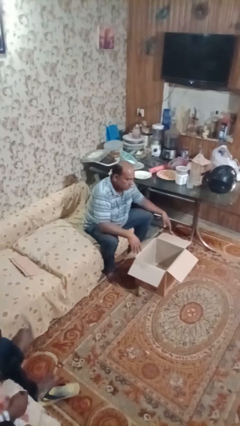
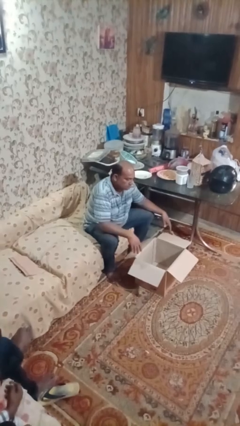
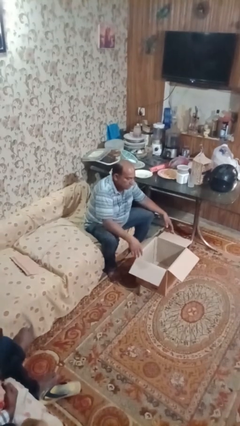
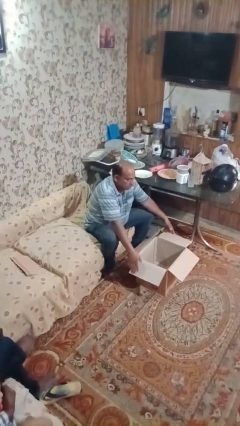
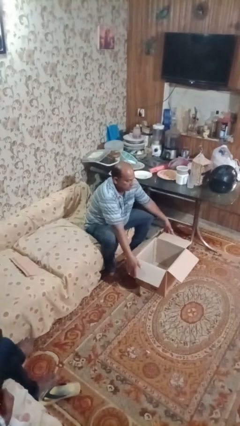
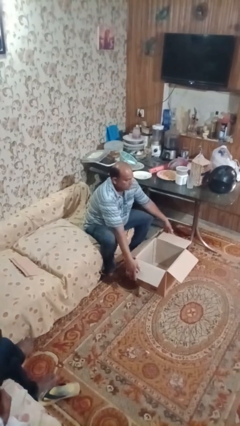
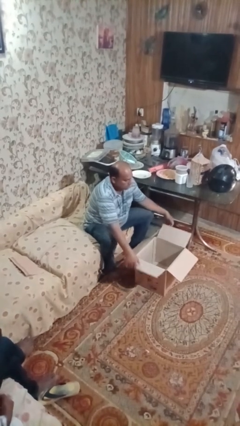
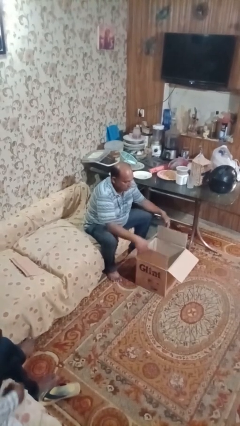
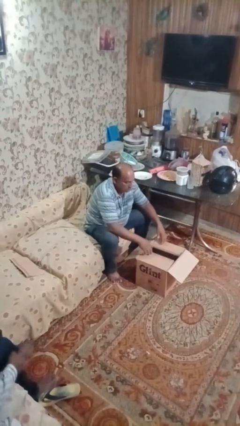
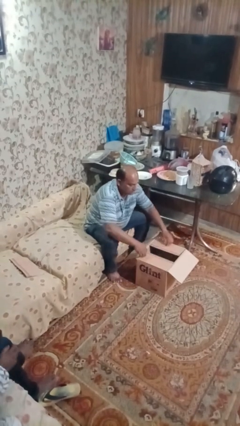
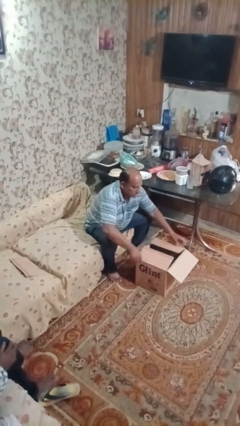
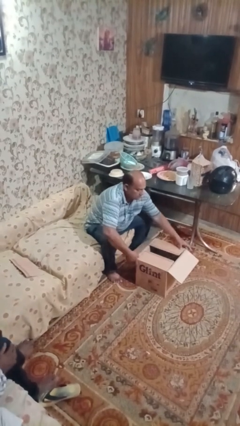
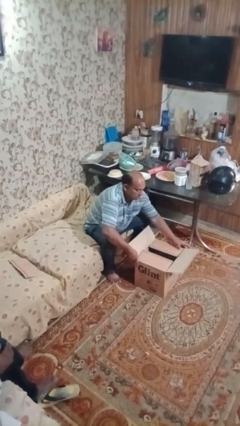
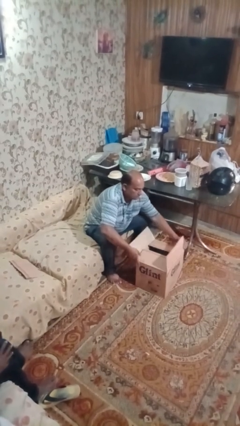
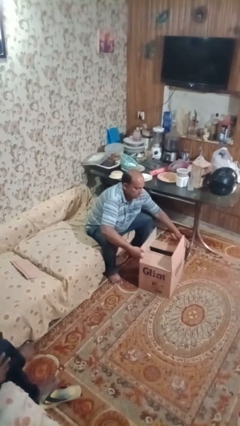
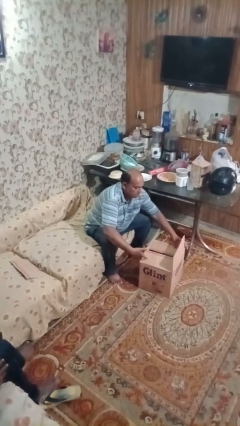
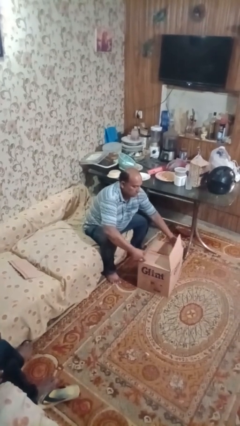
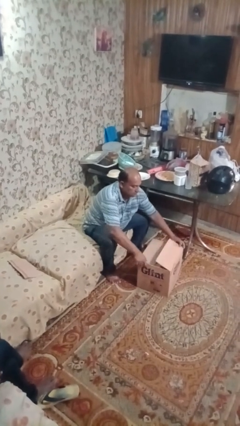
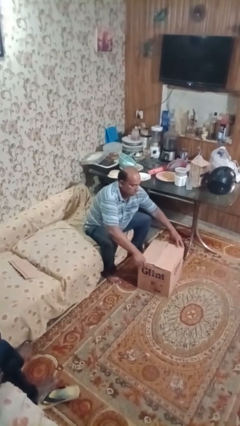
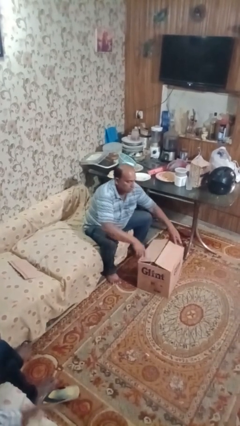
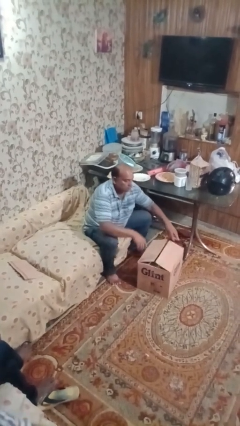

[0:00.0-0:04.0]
person closes box

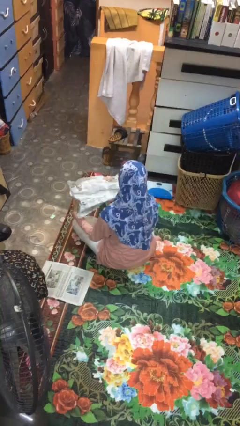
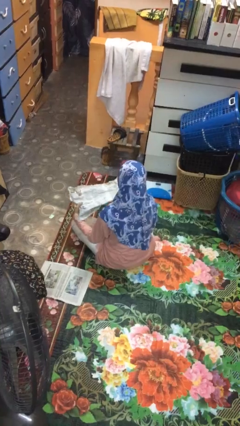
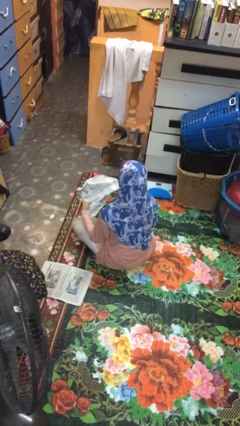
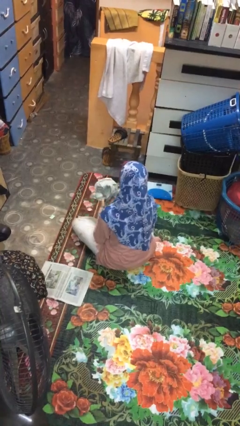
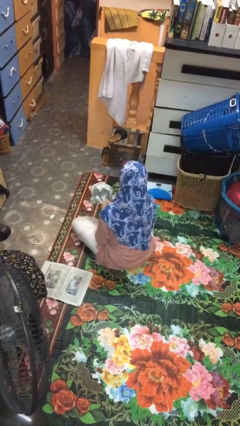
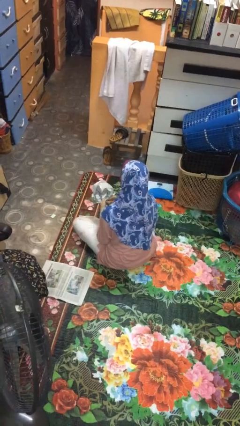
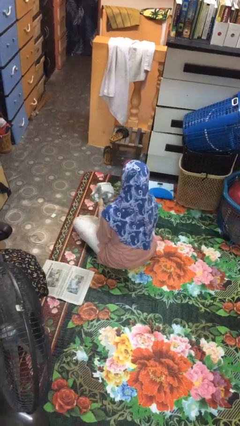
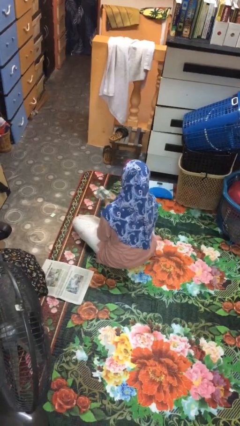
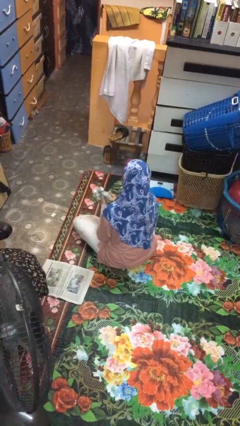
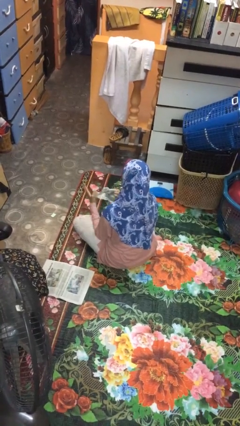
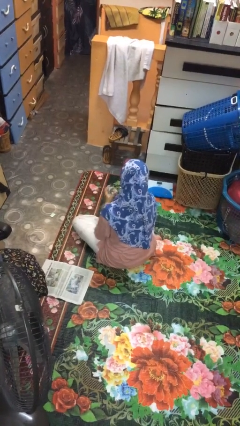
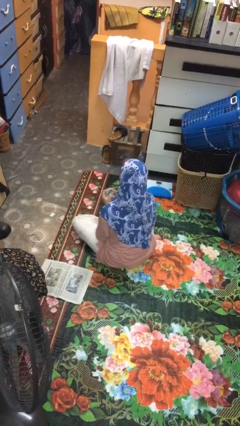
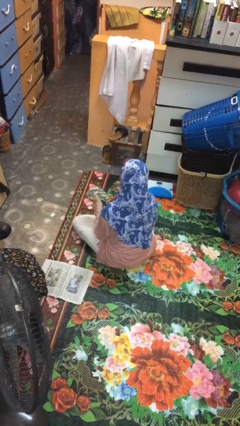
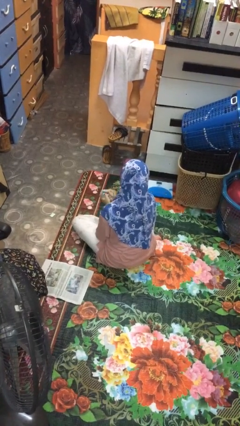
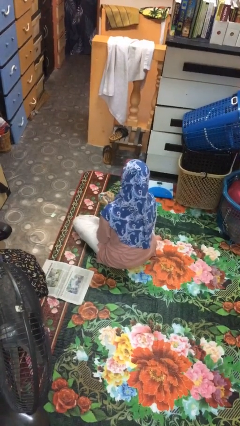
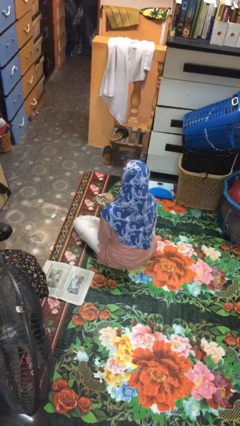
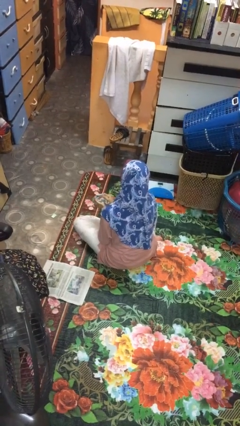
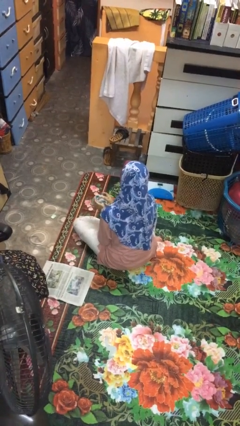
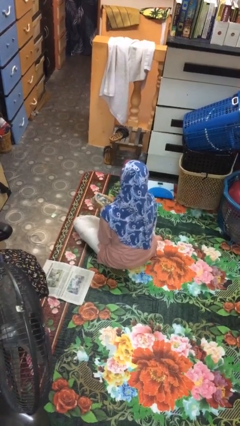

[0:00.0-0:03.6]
person crumples paper

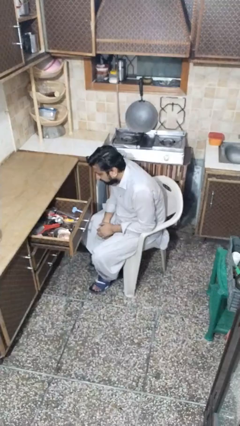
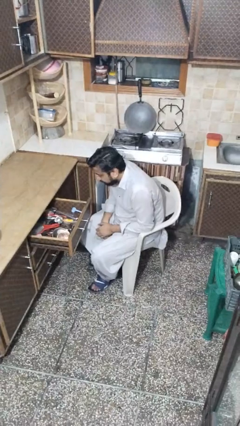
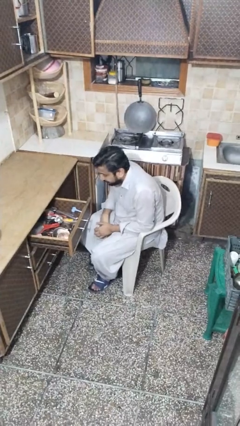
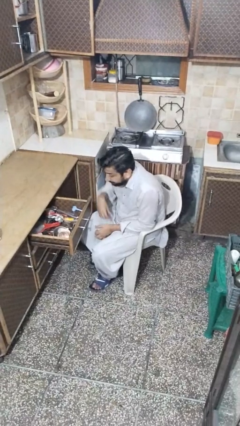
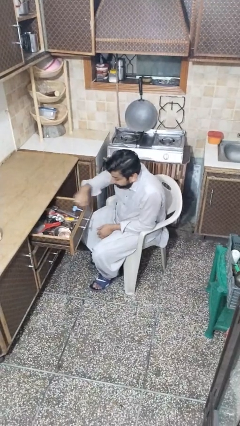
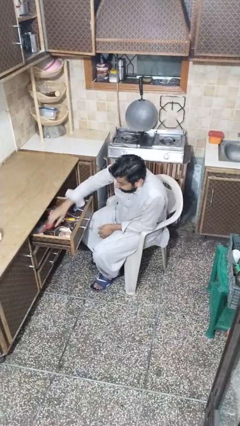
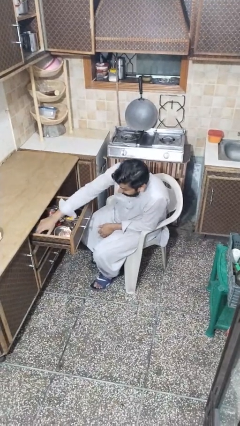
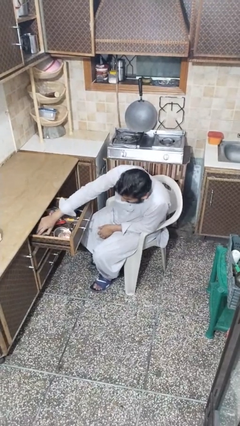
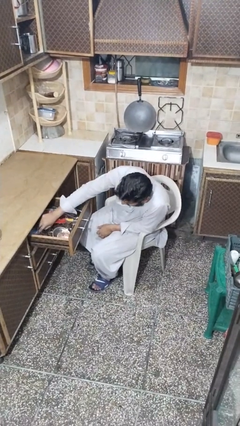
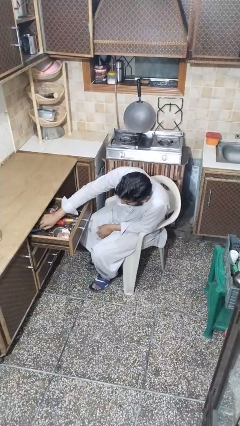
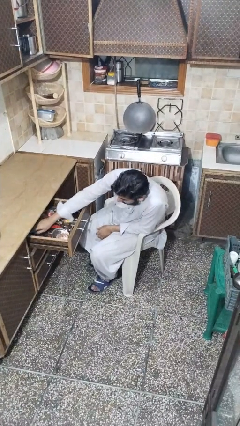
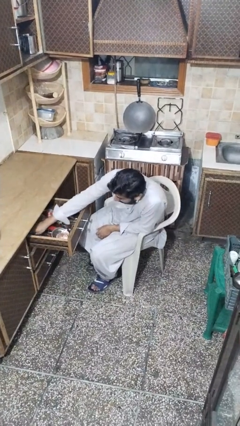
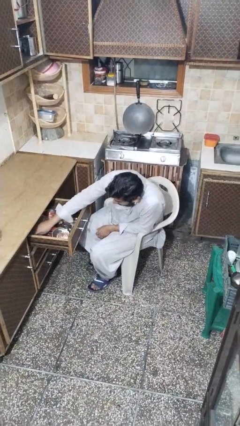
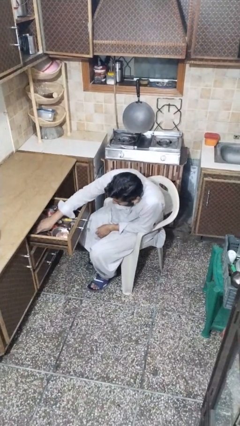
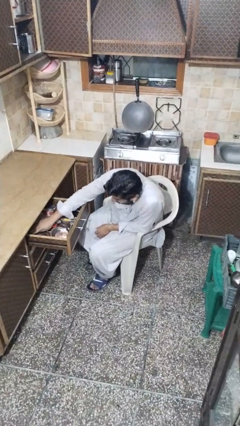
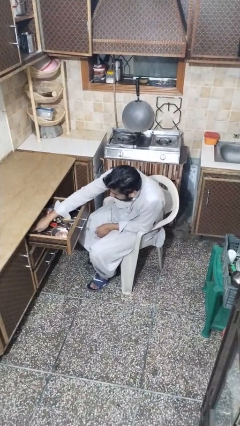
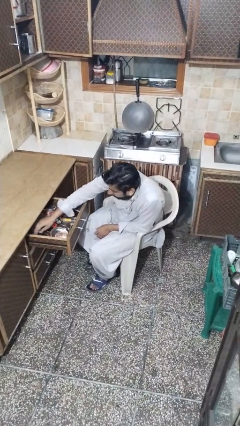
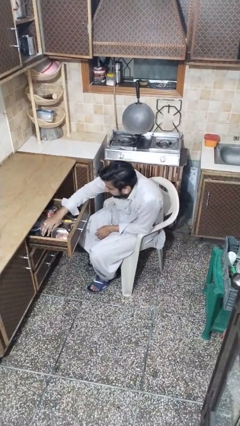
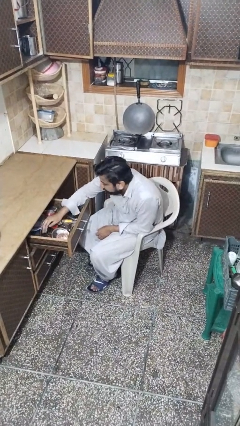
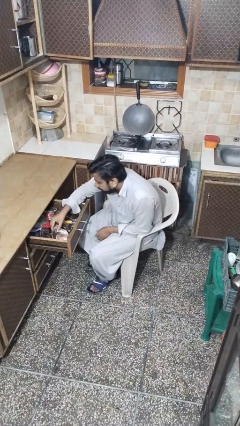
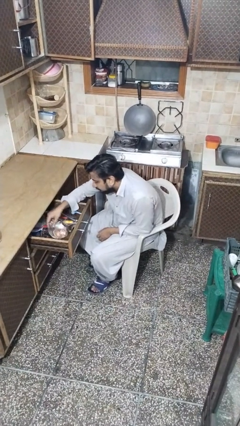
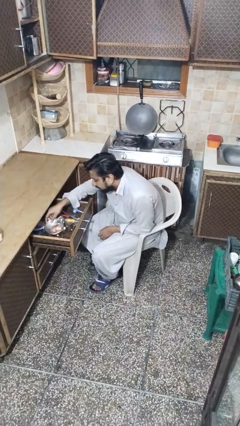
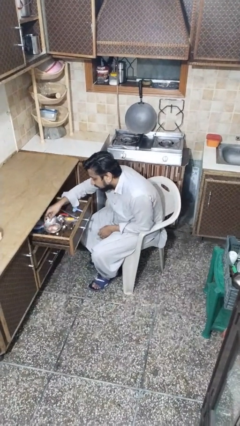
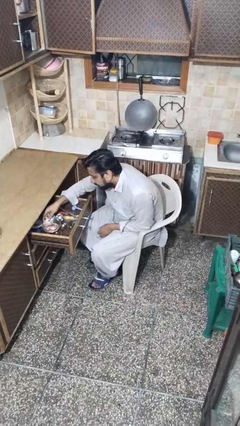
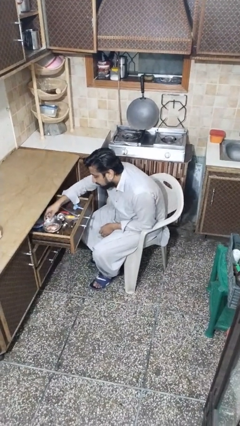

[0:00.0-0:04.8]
person searches in kitchen drawer

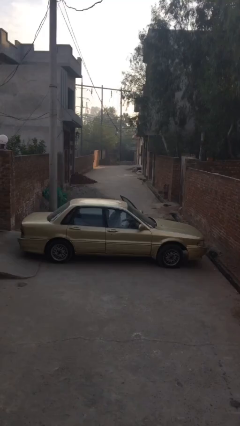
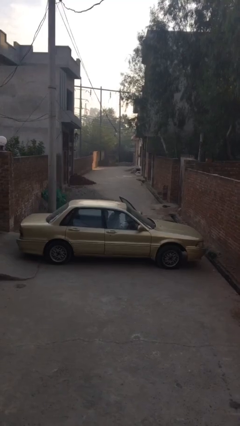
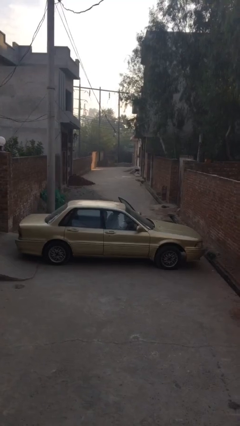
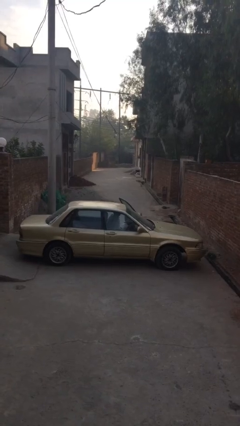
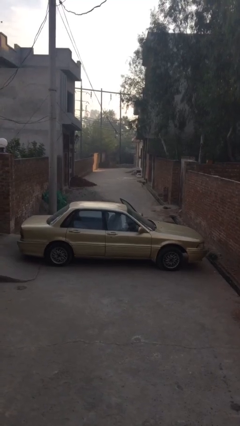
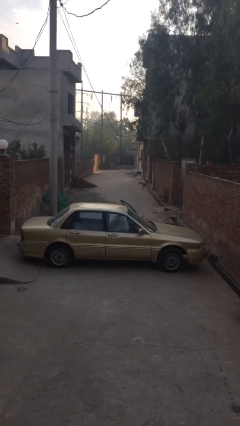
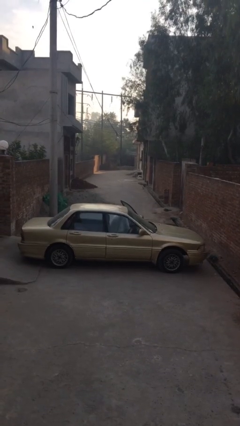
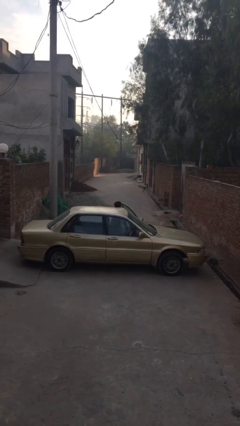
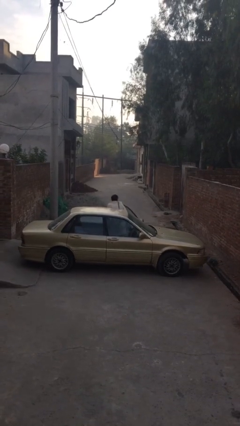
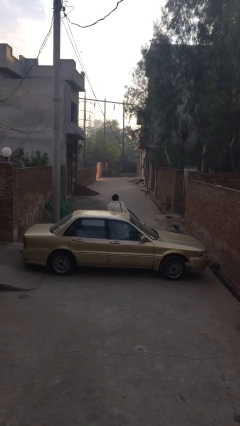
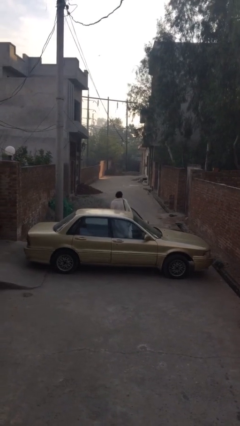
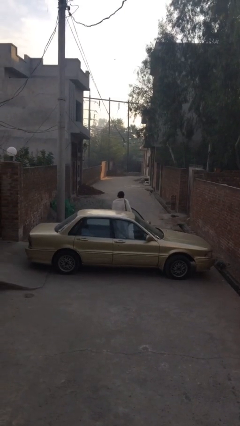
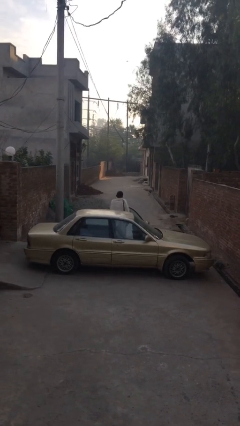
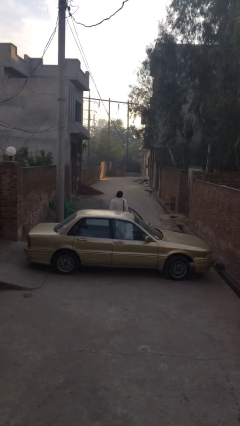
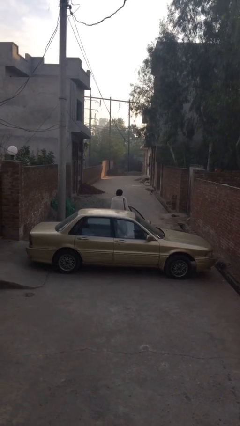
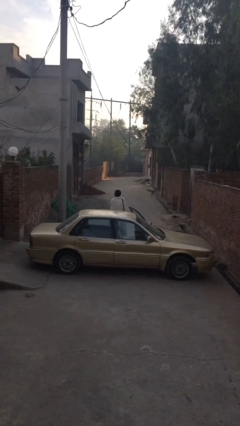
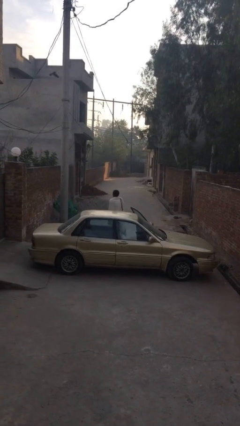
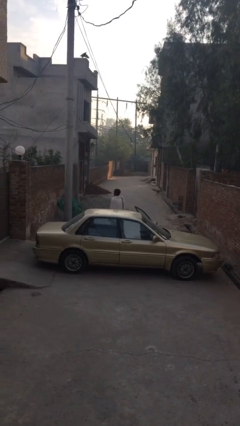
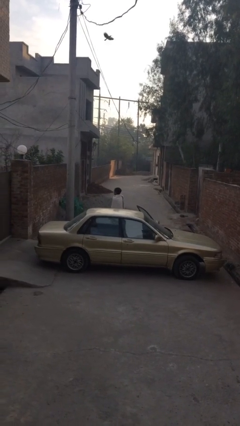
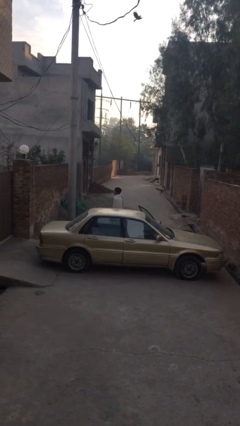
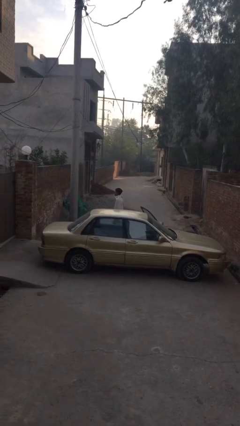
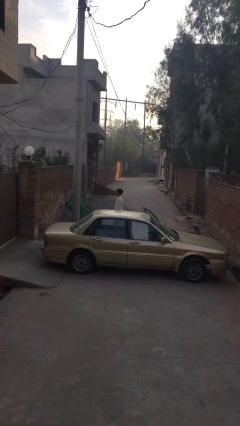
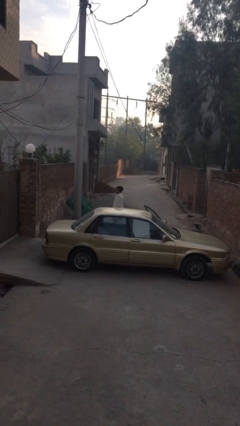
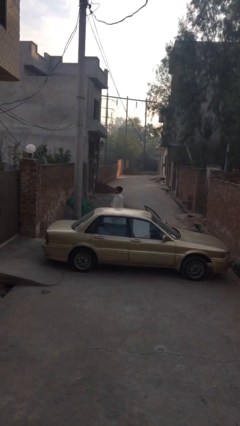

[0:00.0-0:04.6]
person exits car

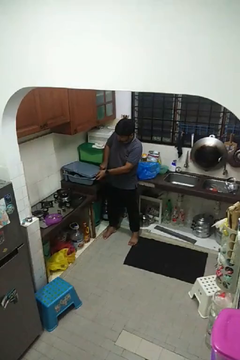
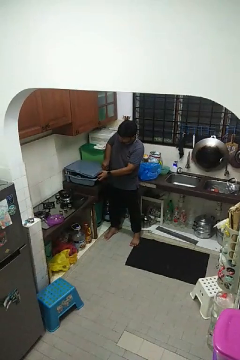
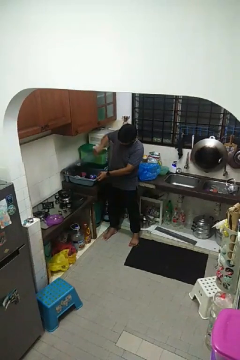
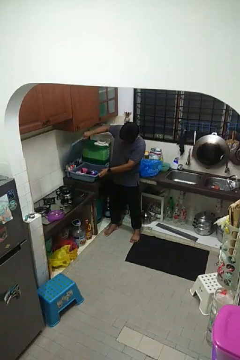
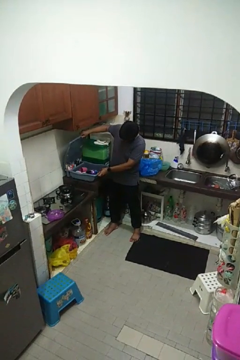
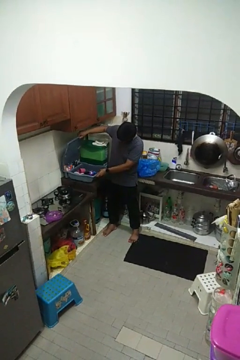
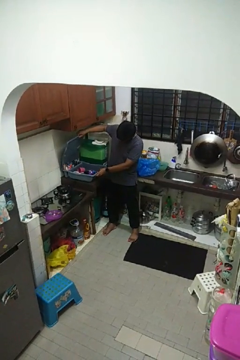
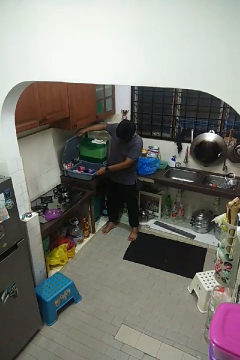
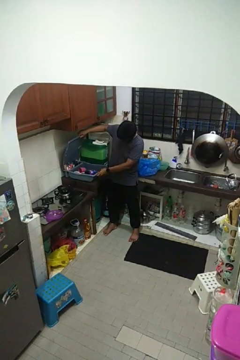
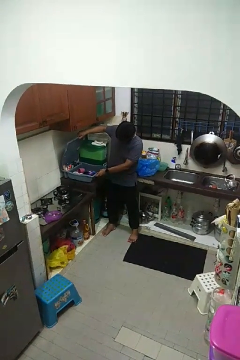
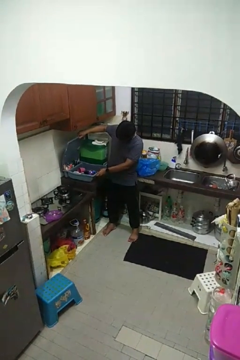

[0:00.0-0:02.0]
person opens dishwasher
